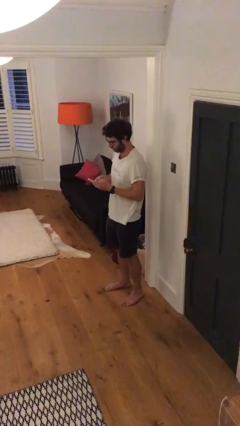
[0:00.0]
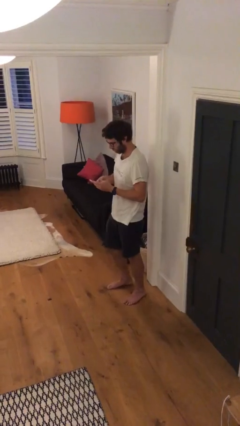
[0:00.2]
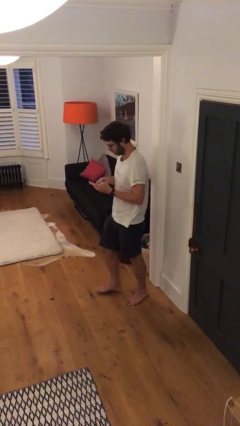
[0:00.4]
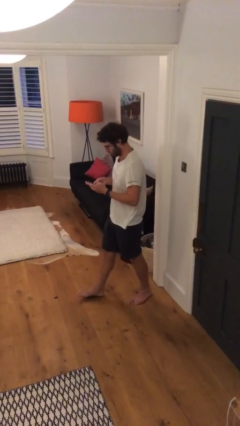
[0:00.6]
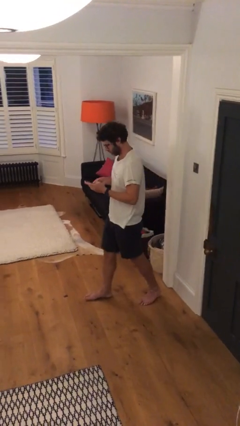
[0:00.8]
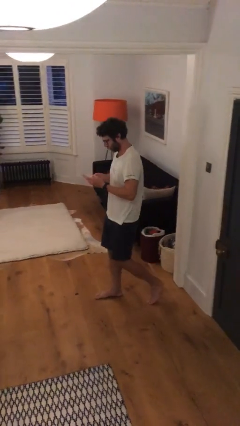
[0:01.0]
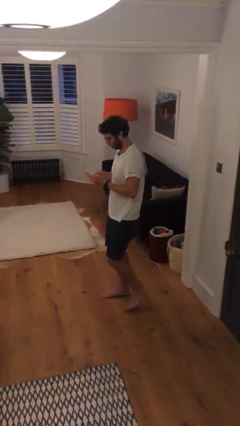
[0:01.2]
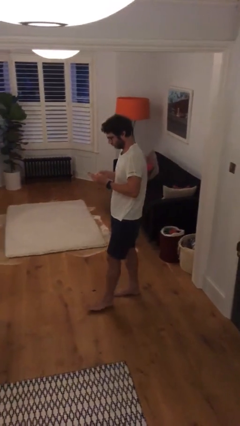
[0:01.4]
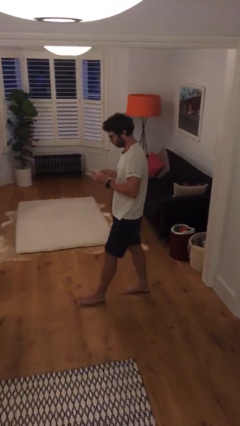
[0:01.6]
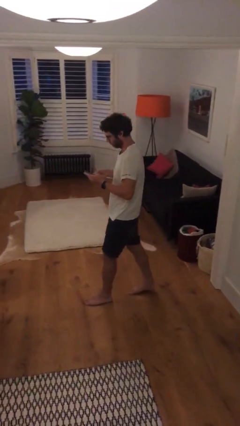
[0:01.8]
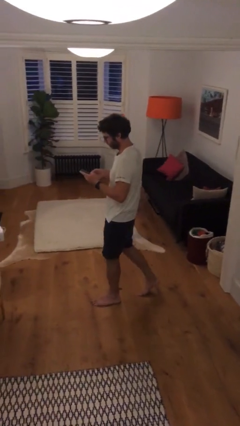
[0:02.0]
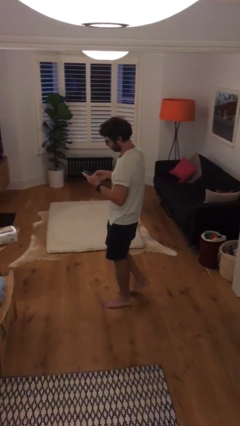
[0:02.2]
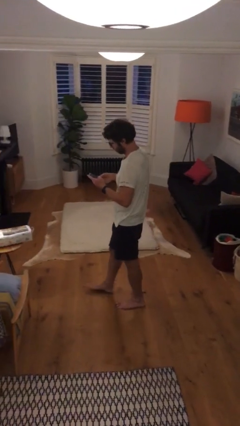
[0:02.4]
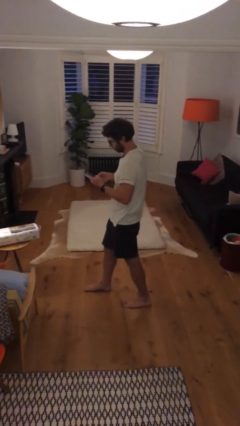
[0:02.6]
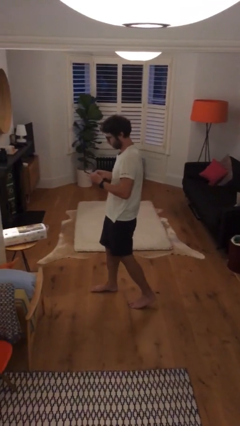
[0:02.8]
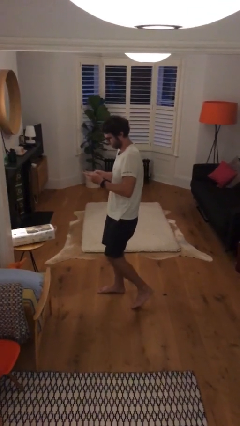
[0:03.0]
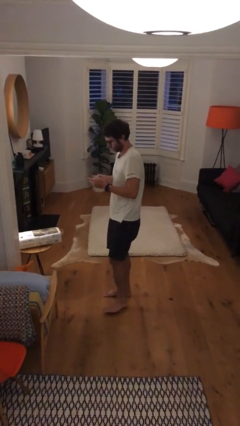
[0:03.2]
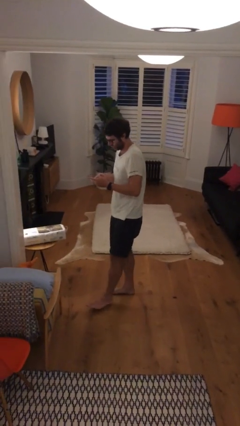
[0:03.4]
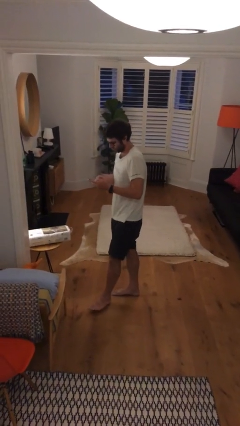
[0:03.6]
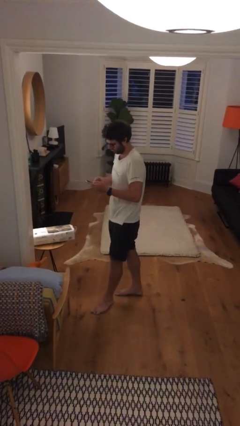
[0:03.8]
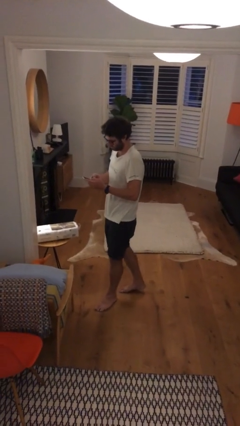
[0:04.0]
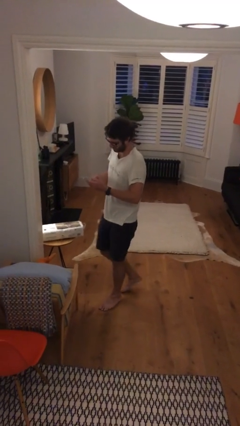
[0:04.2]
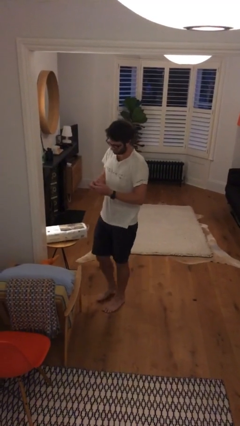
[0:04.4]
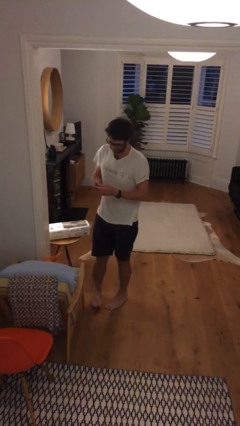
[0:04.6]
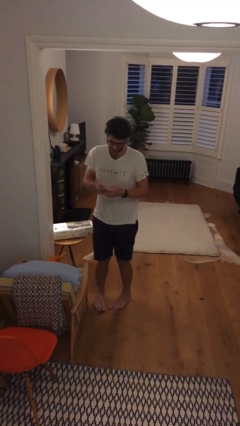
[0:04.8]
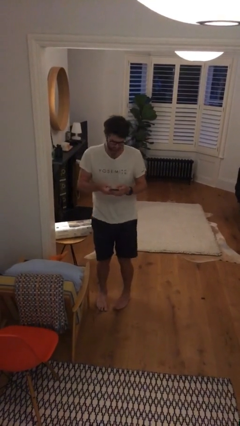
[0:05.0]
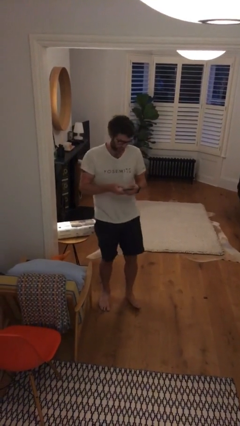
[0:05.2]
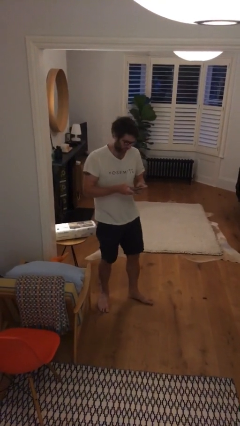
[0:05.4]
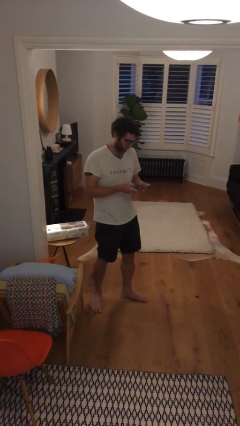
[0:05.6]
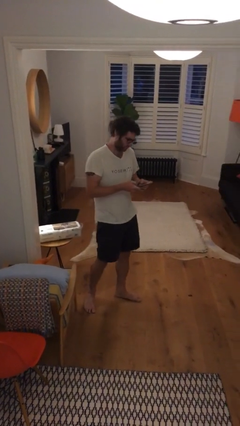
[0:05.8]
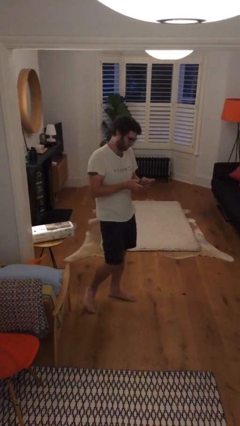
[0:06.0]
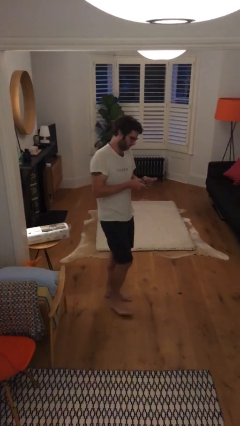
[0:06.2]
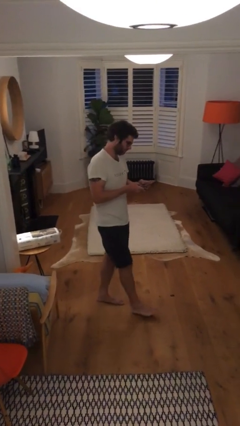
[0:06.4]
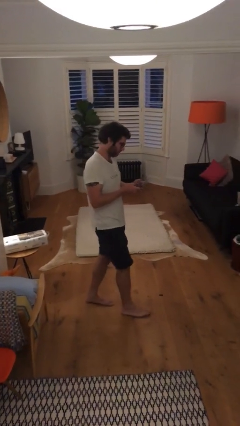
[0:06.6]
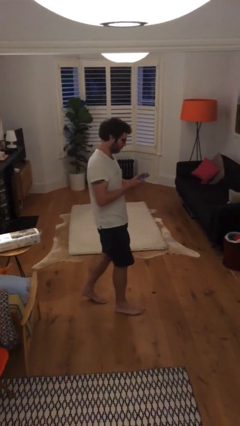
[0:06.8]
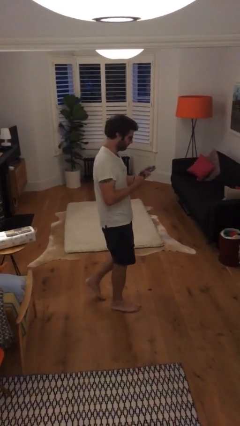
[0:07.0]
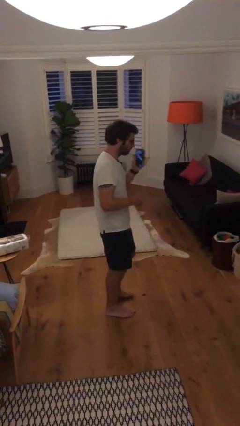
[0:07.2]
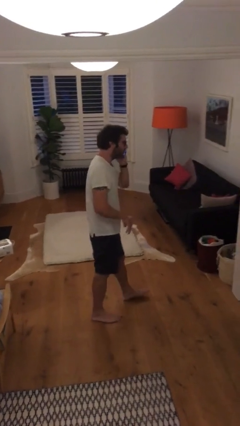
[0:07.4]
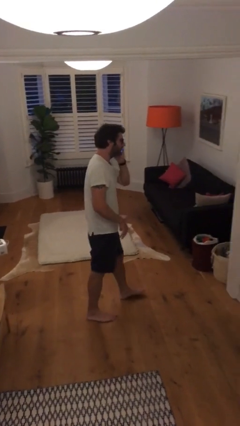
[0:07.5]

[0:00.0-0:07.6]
person texts on phone

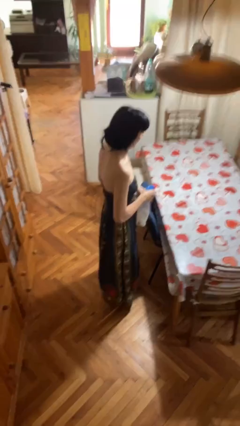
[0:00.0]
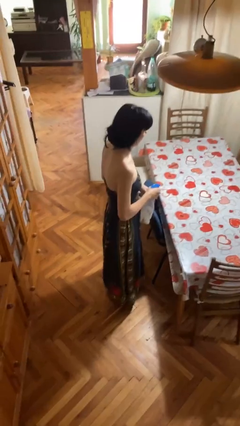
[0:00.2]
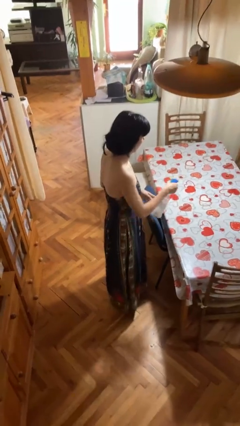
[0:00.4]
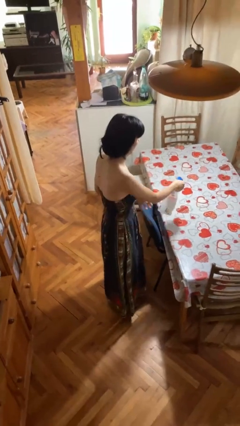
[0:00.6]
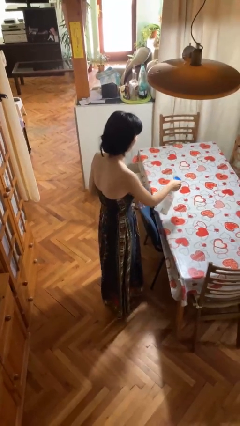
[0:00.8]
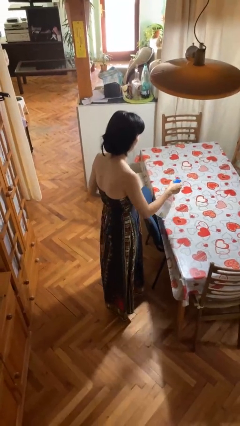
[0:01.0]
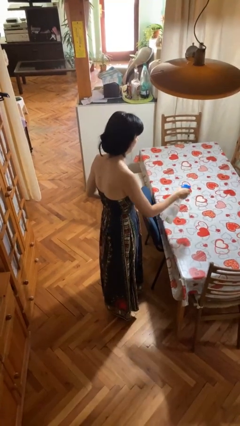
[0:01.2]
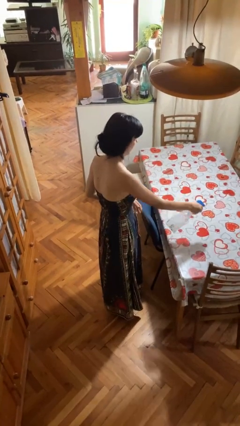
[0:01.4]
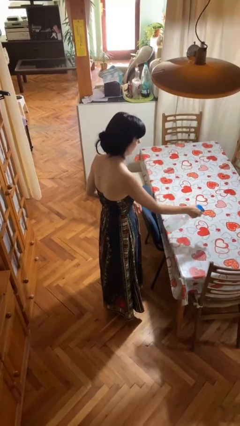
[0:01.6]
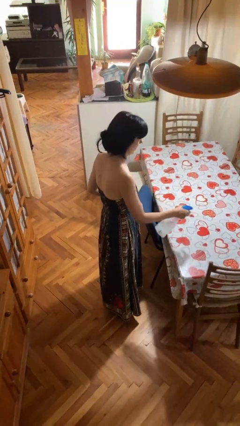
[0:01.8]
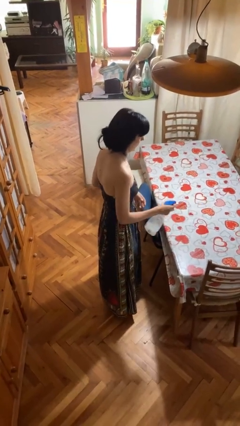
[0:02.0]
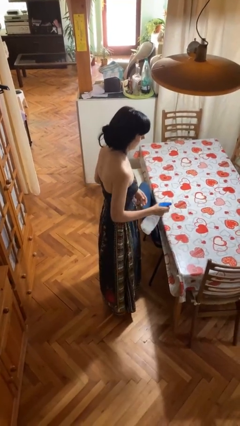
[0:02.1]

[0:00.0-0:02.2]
person sprays from bottle

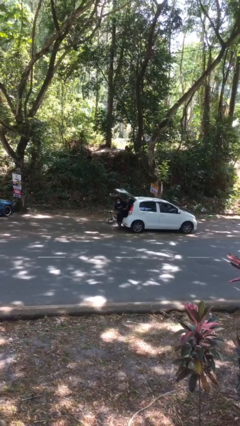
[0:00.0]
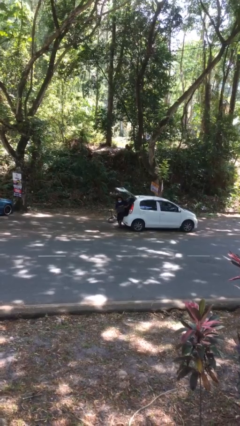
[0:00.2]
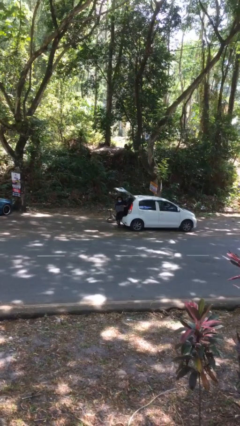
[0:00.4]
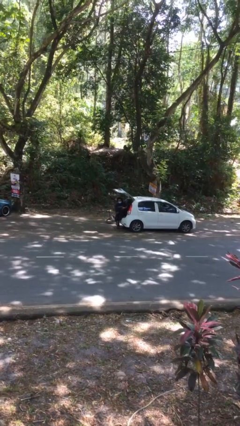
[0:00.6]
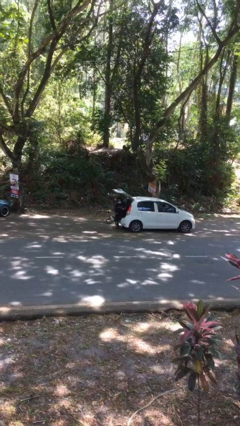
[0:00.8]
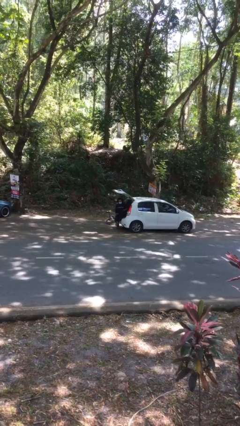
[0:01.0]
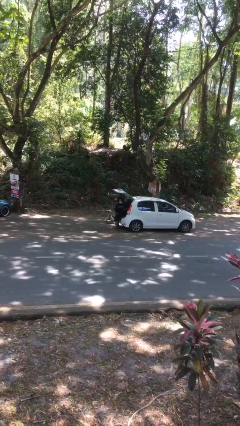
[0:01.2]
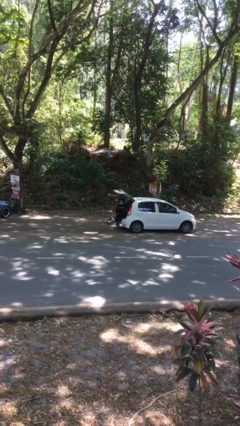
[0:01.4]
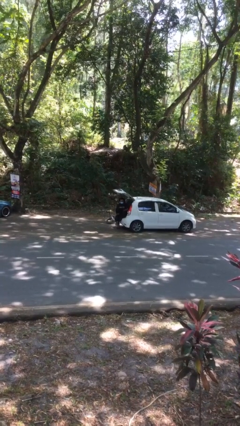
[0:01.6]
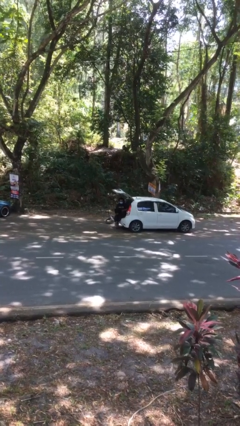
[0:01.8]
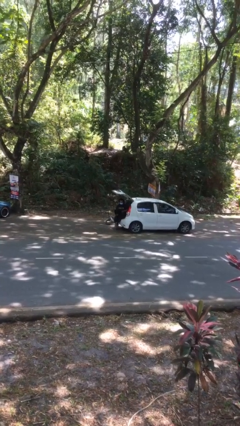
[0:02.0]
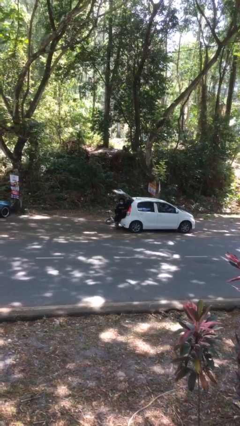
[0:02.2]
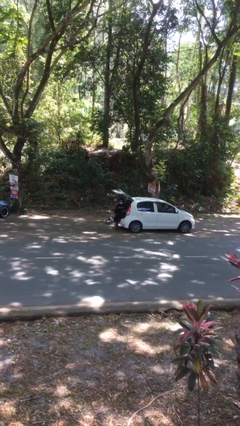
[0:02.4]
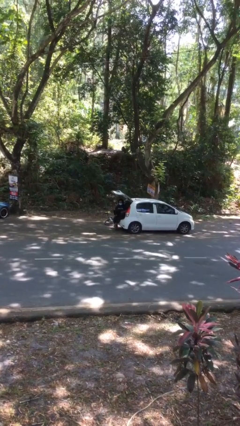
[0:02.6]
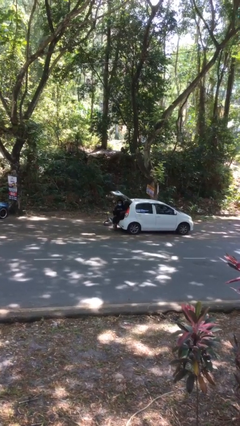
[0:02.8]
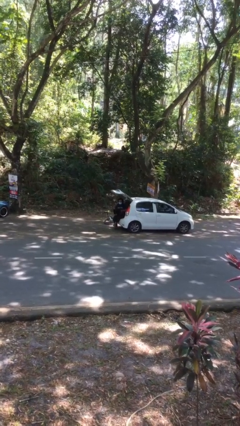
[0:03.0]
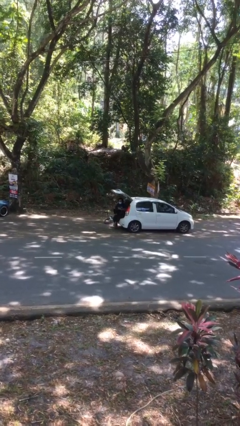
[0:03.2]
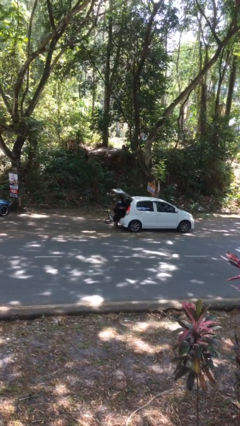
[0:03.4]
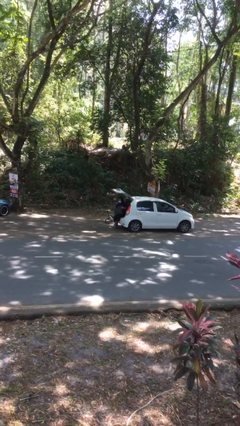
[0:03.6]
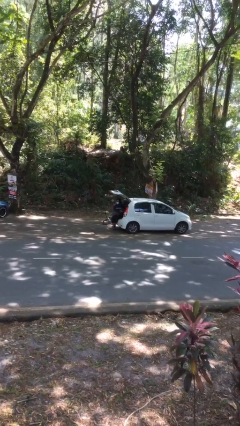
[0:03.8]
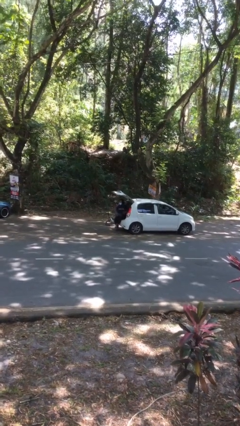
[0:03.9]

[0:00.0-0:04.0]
person interacts with laptop

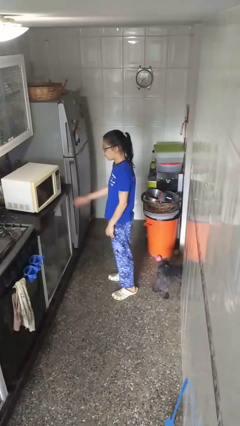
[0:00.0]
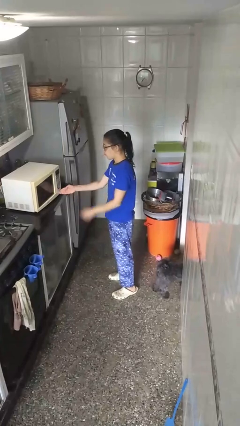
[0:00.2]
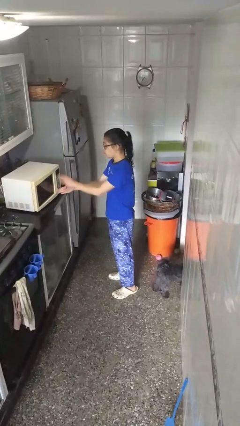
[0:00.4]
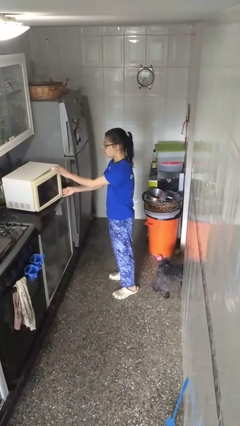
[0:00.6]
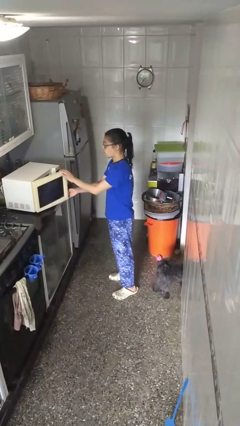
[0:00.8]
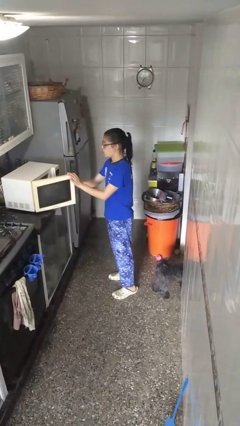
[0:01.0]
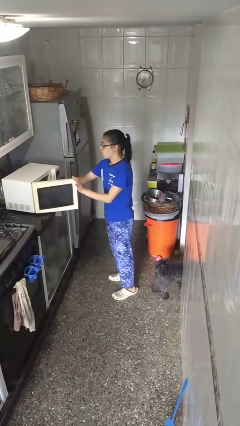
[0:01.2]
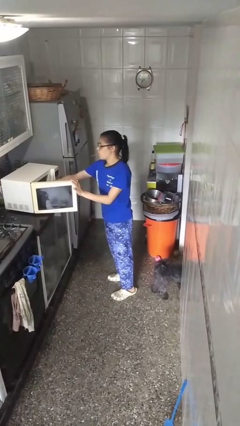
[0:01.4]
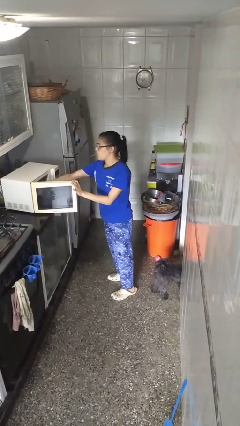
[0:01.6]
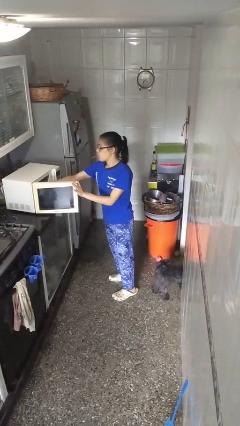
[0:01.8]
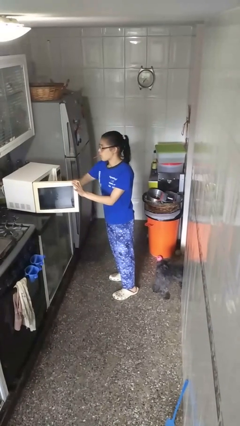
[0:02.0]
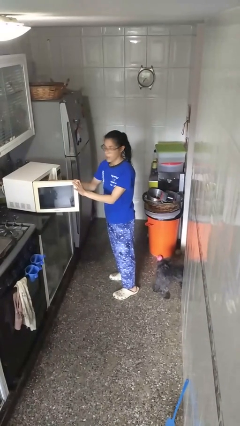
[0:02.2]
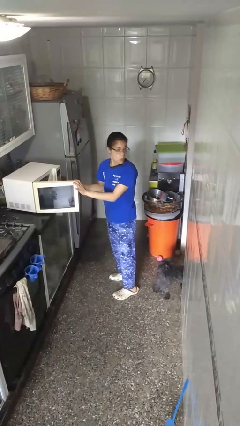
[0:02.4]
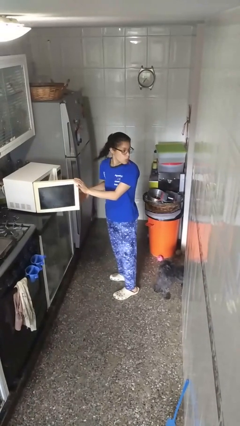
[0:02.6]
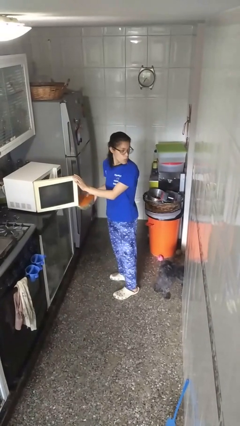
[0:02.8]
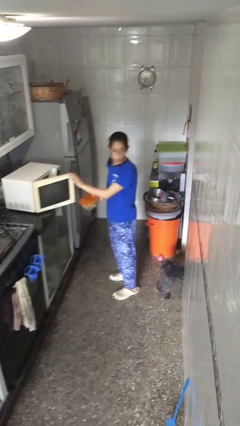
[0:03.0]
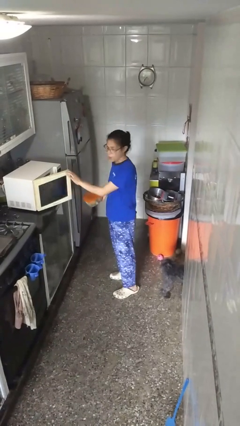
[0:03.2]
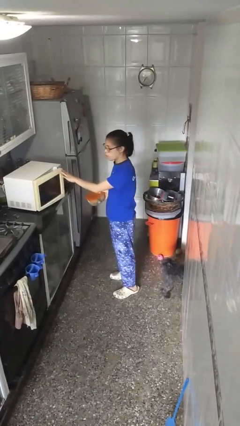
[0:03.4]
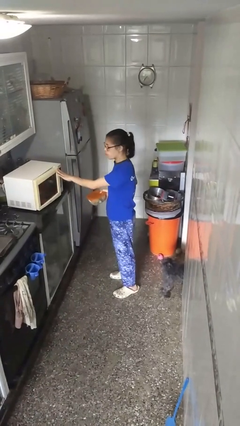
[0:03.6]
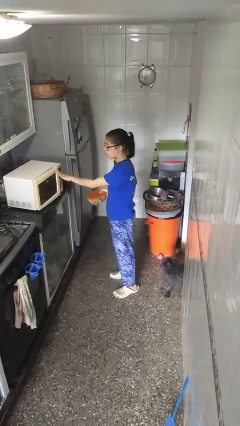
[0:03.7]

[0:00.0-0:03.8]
person takes object from microwave

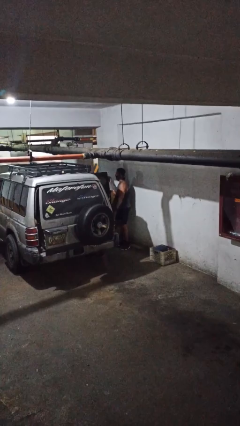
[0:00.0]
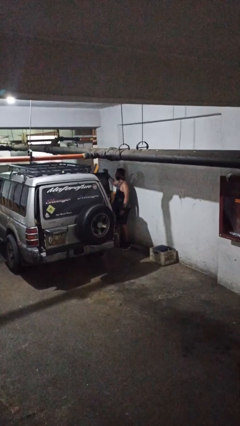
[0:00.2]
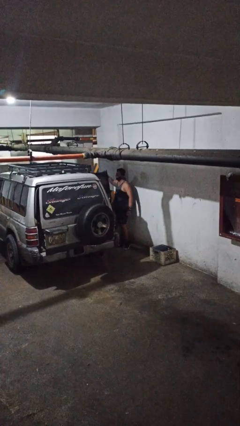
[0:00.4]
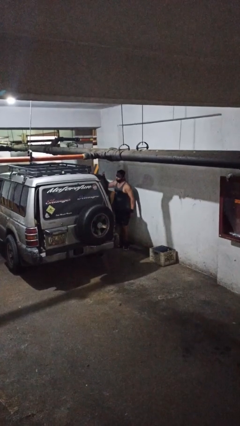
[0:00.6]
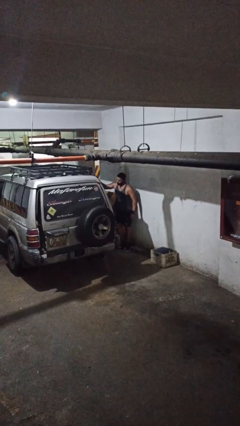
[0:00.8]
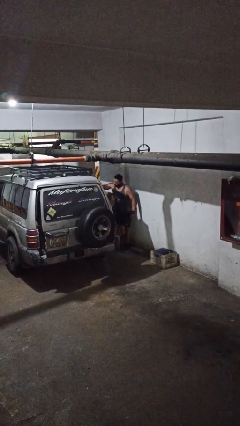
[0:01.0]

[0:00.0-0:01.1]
person closes car door
